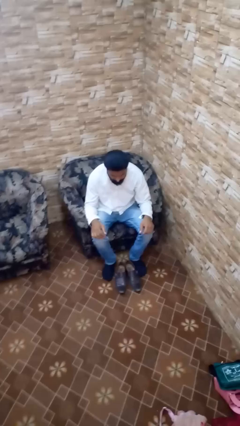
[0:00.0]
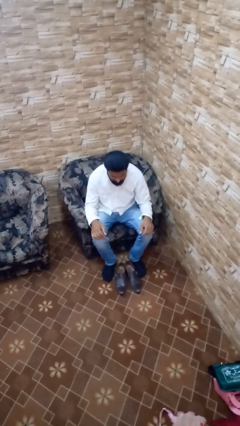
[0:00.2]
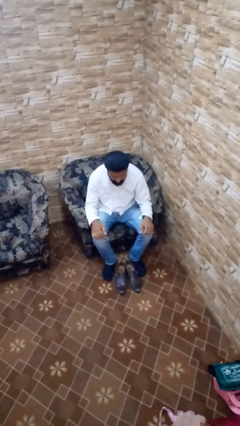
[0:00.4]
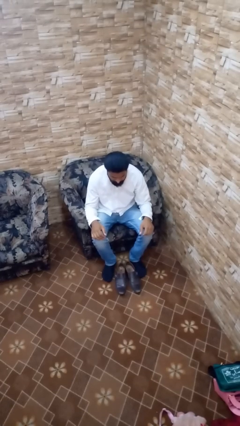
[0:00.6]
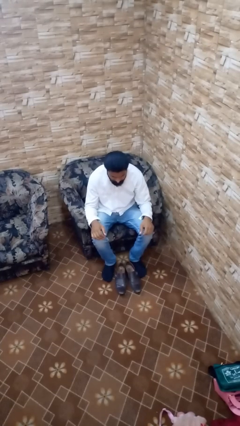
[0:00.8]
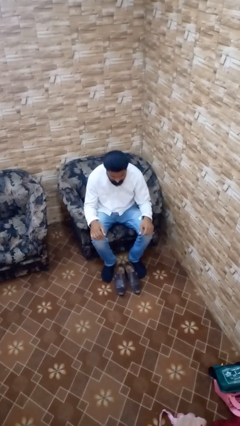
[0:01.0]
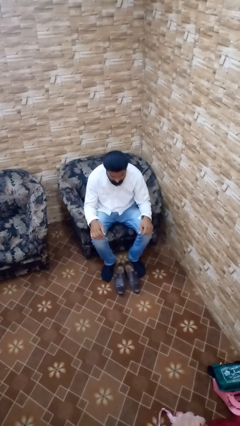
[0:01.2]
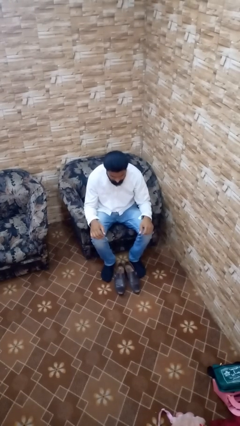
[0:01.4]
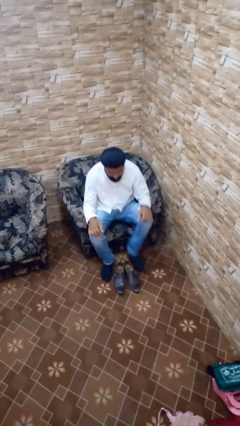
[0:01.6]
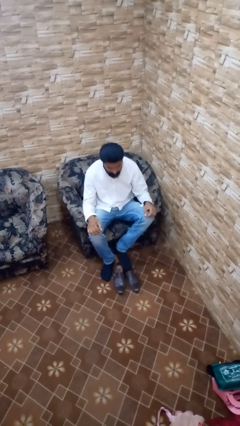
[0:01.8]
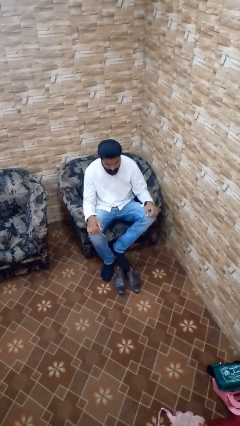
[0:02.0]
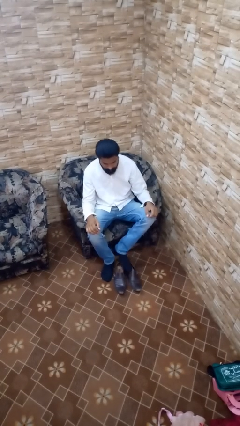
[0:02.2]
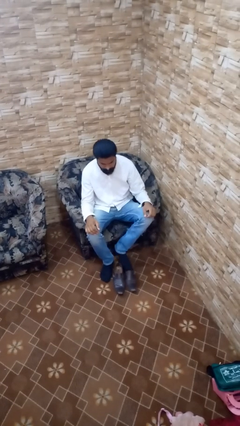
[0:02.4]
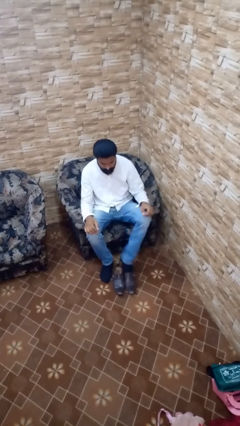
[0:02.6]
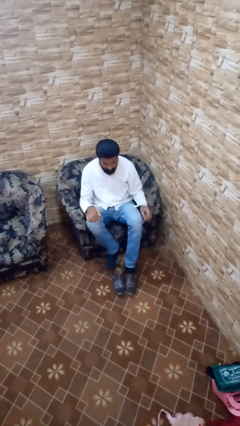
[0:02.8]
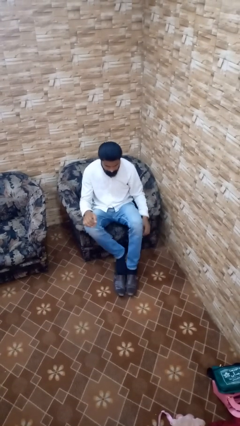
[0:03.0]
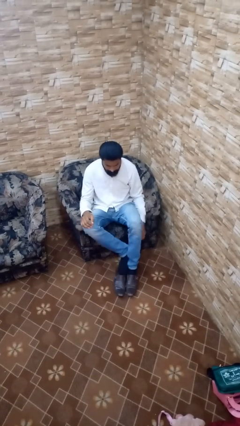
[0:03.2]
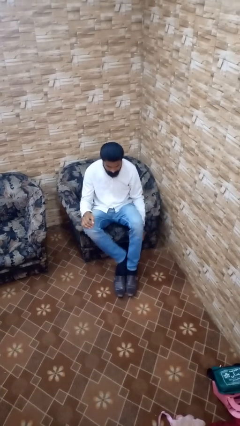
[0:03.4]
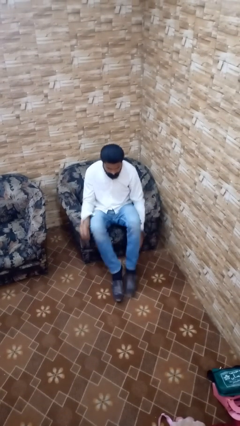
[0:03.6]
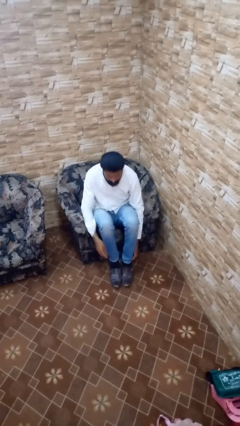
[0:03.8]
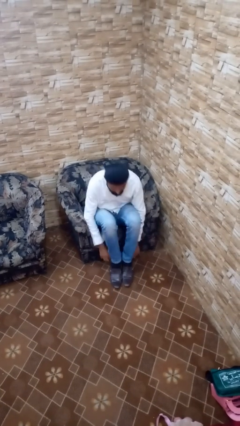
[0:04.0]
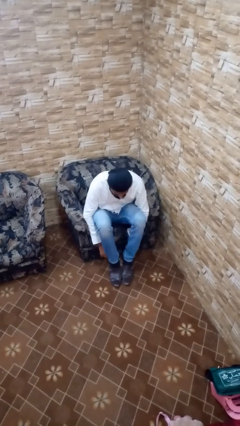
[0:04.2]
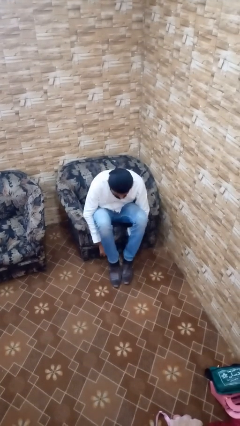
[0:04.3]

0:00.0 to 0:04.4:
person puts on shoes

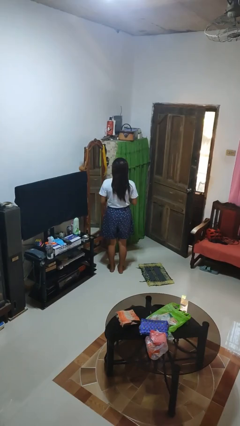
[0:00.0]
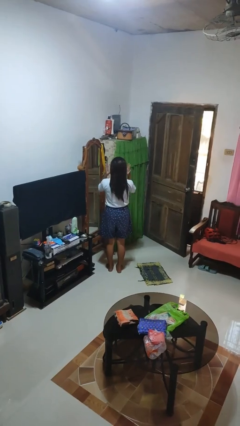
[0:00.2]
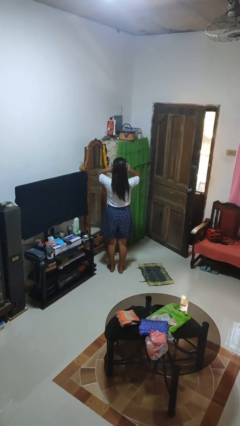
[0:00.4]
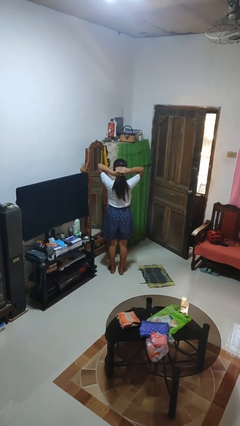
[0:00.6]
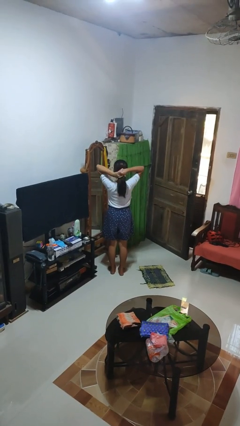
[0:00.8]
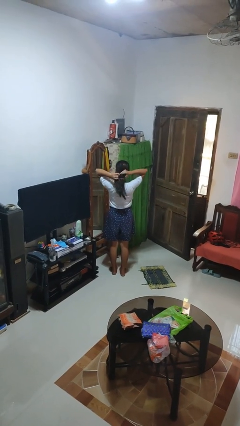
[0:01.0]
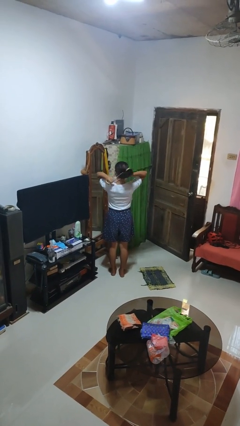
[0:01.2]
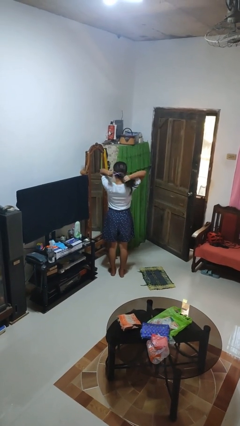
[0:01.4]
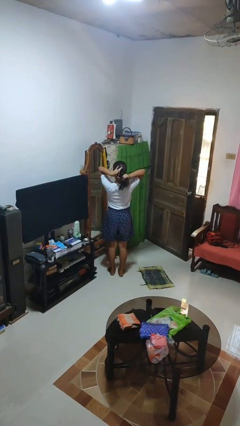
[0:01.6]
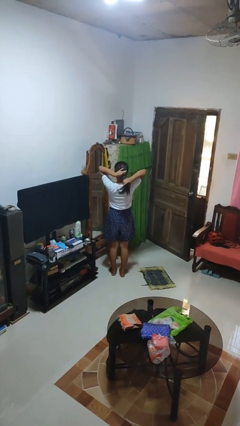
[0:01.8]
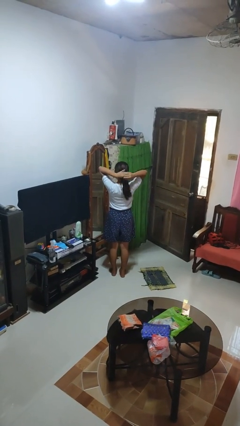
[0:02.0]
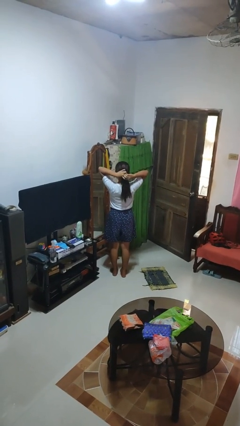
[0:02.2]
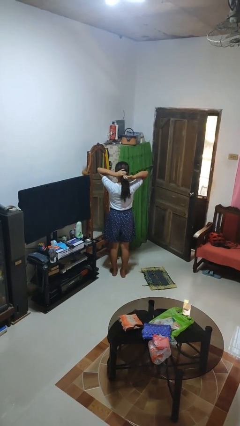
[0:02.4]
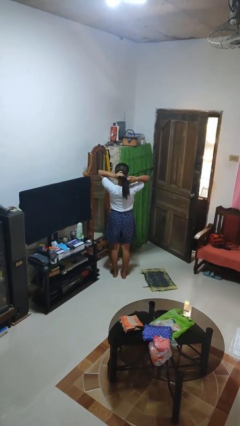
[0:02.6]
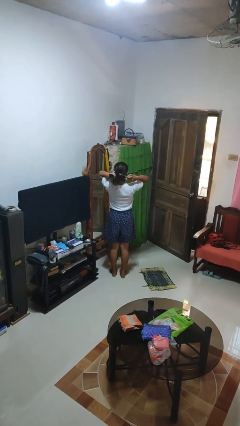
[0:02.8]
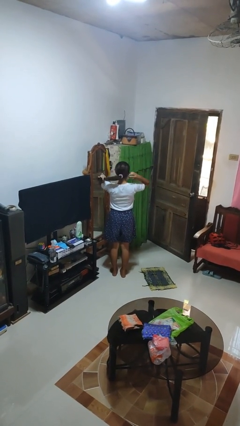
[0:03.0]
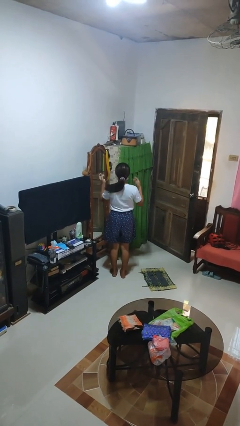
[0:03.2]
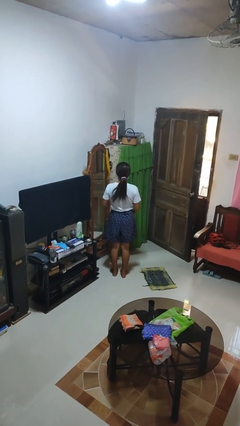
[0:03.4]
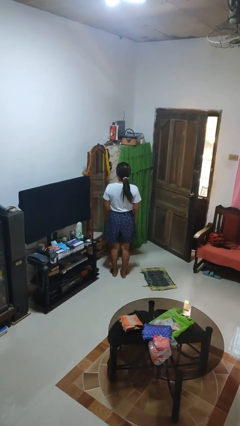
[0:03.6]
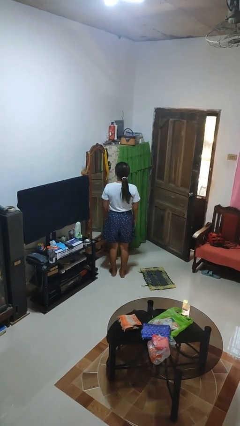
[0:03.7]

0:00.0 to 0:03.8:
person puts hair in ponytail

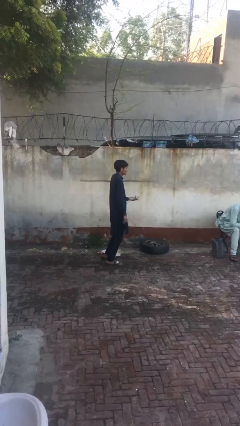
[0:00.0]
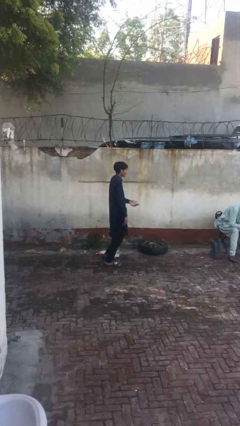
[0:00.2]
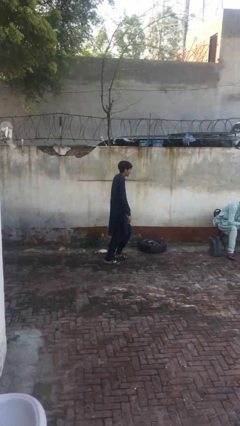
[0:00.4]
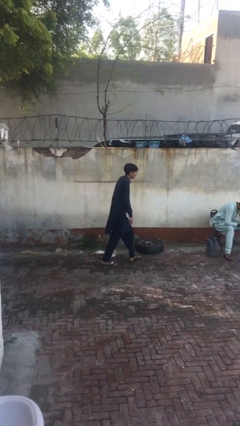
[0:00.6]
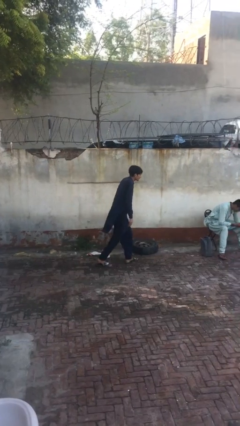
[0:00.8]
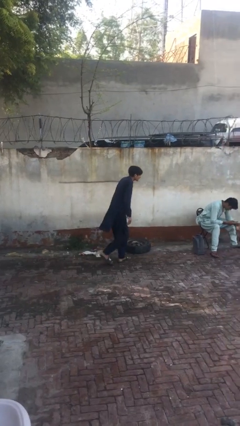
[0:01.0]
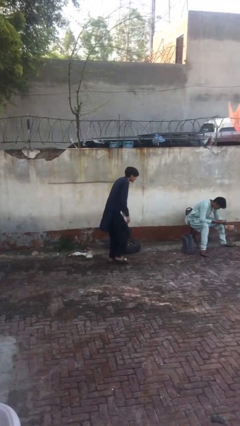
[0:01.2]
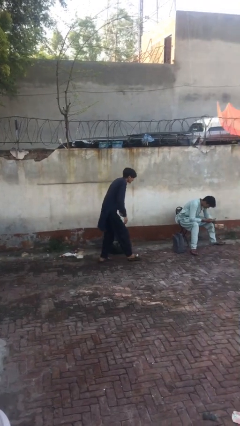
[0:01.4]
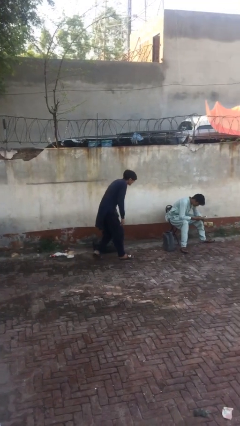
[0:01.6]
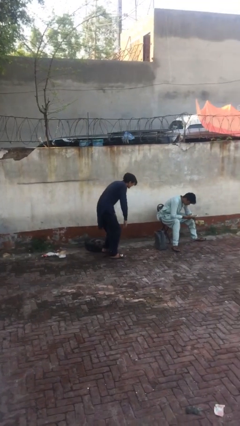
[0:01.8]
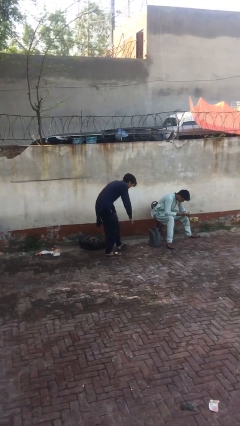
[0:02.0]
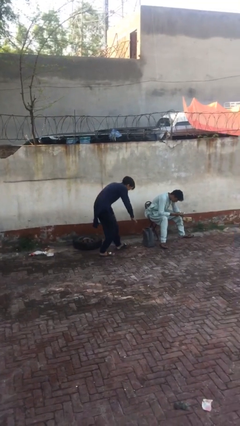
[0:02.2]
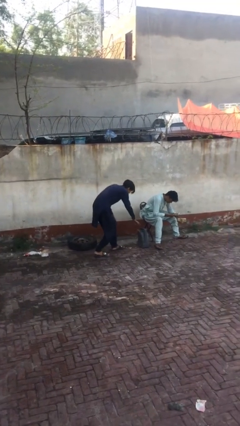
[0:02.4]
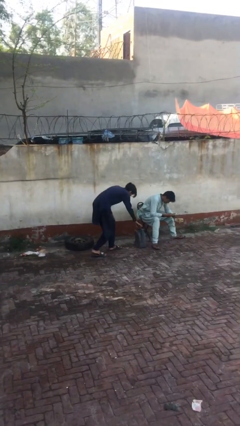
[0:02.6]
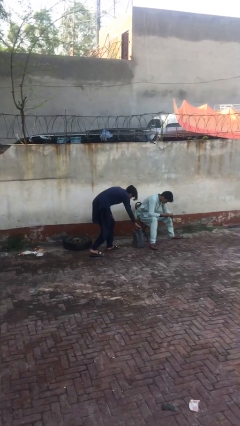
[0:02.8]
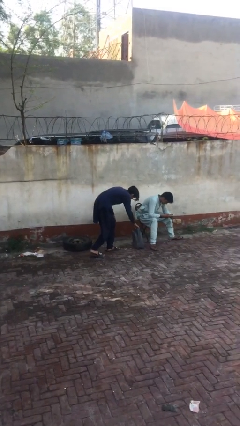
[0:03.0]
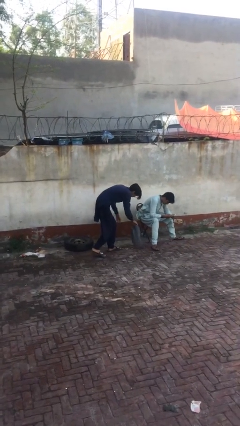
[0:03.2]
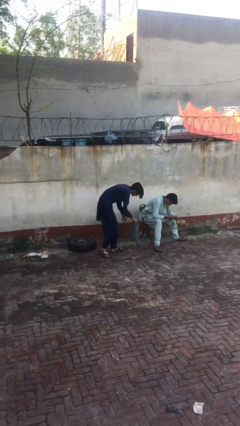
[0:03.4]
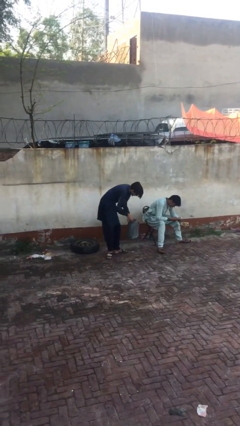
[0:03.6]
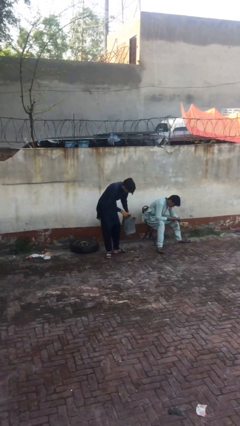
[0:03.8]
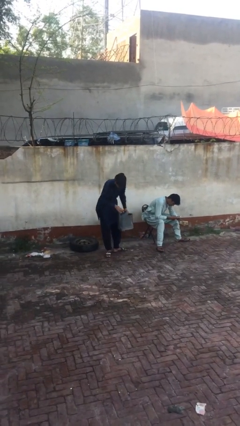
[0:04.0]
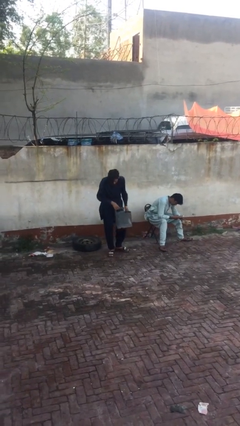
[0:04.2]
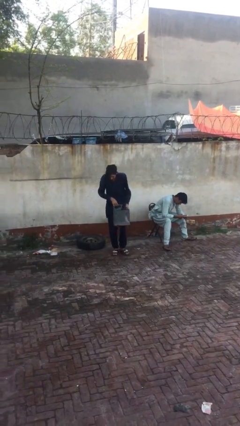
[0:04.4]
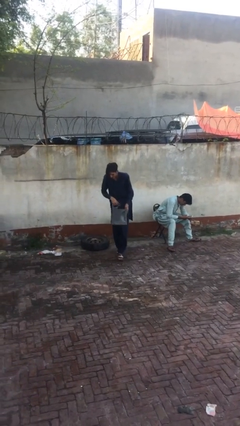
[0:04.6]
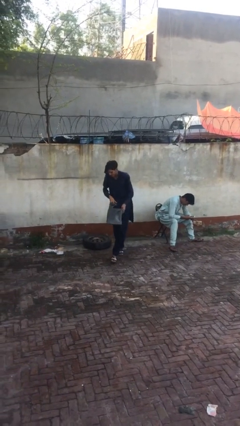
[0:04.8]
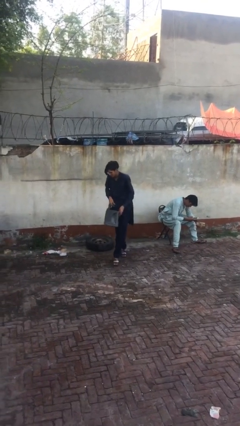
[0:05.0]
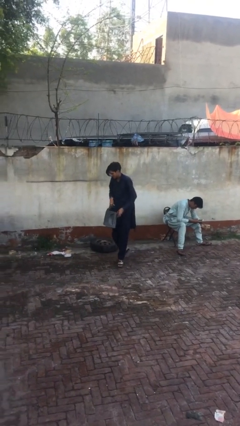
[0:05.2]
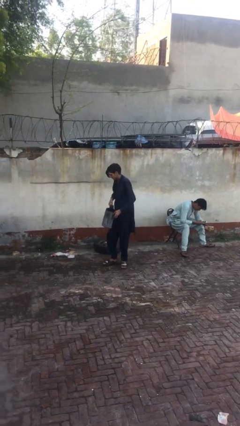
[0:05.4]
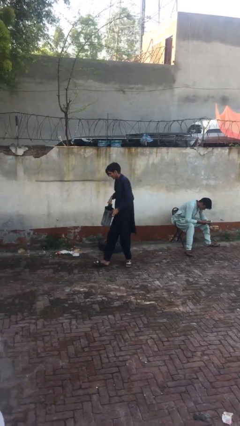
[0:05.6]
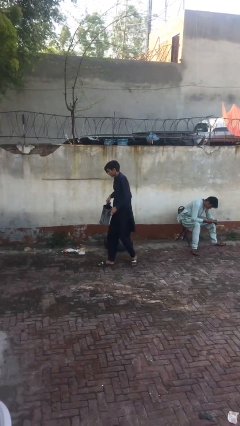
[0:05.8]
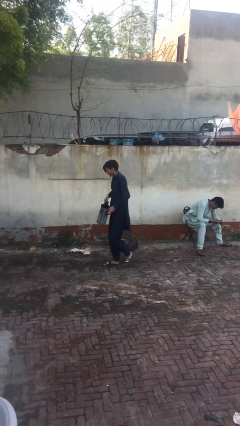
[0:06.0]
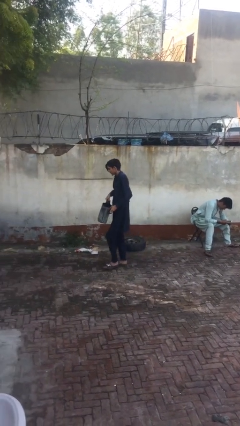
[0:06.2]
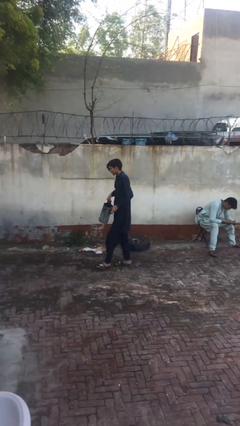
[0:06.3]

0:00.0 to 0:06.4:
person steals object from person

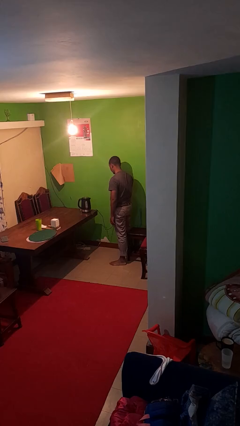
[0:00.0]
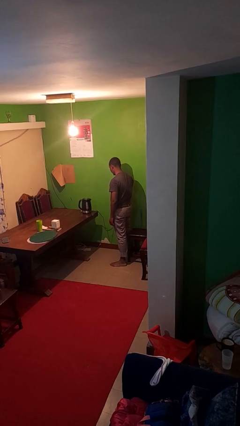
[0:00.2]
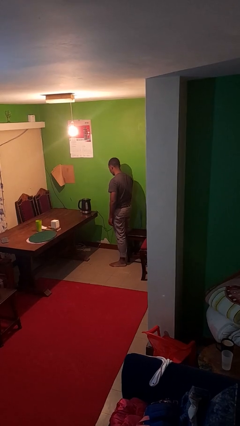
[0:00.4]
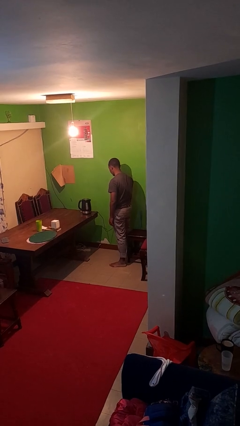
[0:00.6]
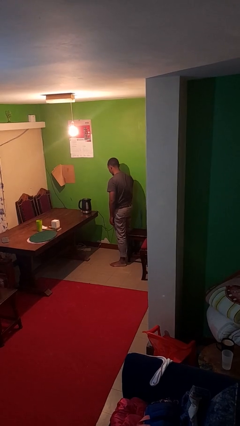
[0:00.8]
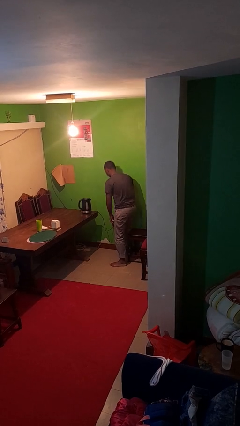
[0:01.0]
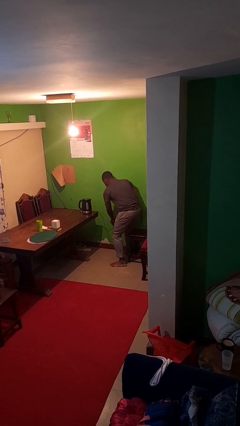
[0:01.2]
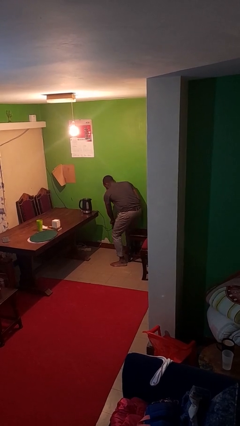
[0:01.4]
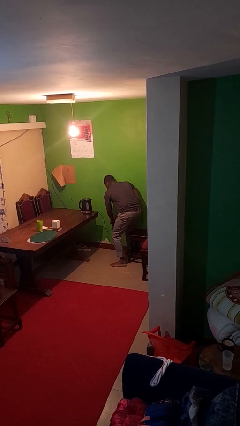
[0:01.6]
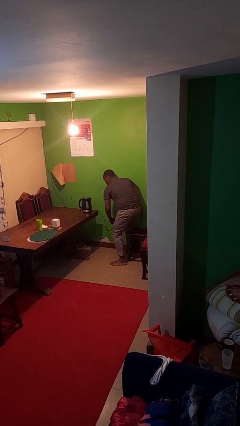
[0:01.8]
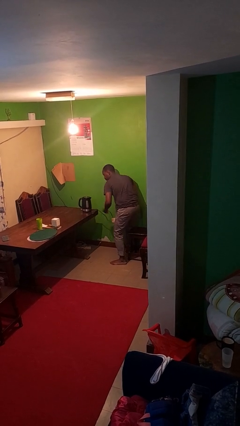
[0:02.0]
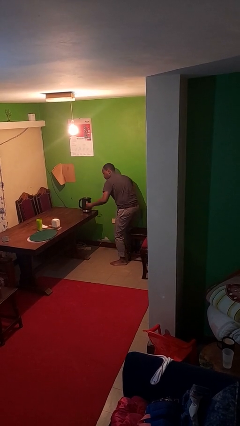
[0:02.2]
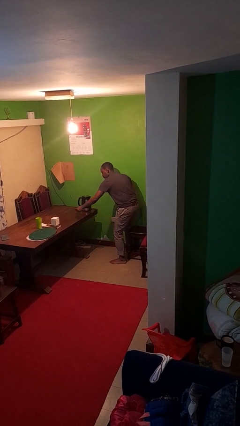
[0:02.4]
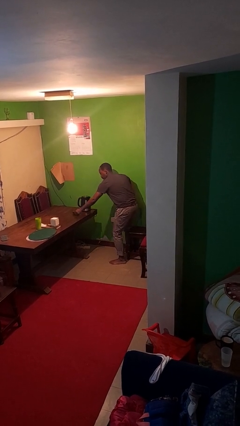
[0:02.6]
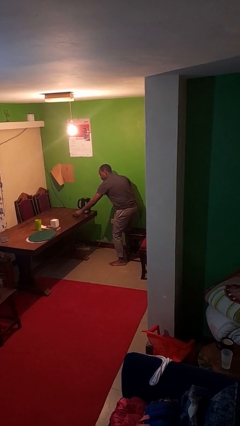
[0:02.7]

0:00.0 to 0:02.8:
person unplugs from electrical socket

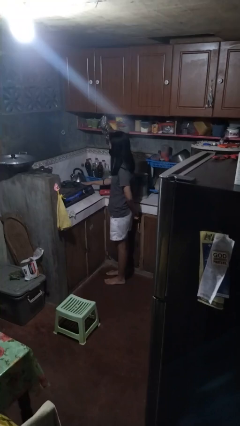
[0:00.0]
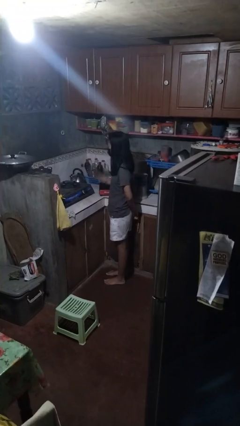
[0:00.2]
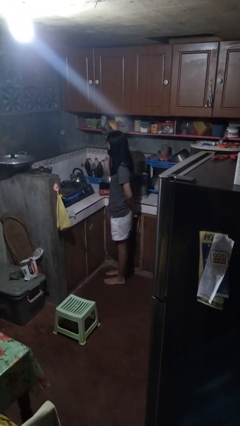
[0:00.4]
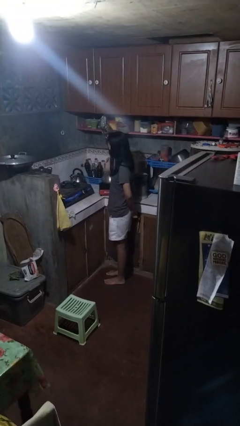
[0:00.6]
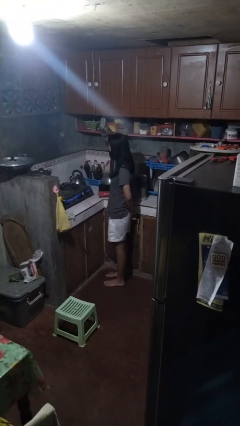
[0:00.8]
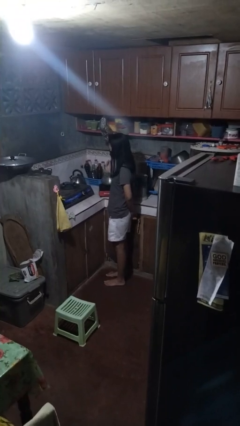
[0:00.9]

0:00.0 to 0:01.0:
person burns hand
